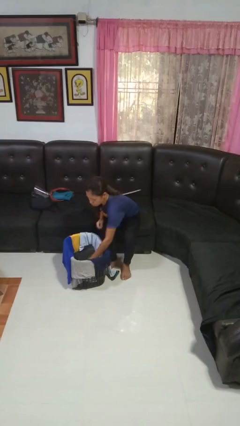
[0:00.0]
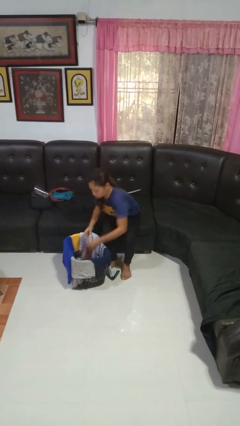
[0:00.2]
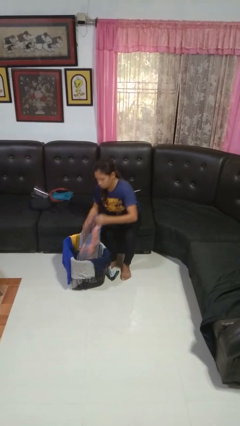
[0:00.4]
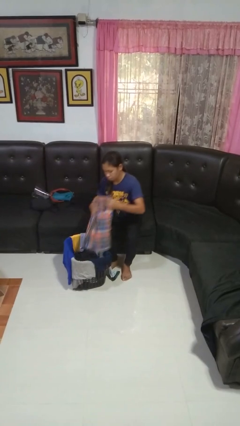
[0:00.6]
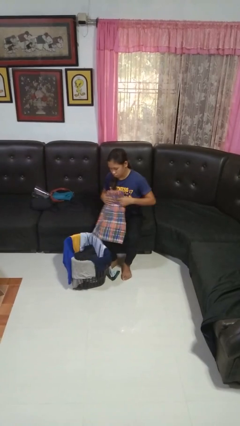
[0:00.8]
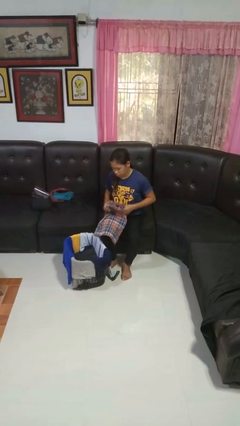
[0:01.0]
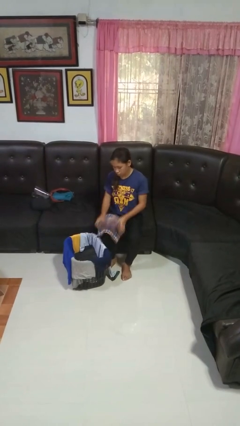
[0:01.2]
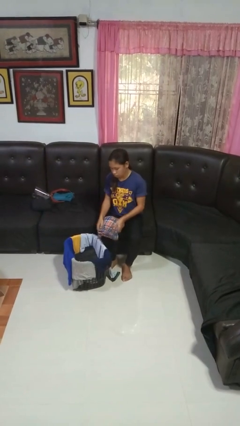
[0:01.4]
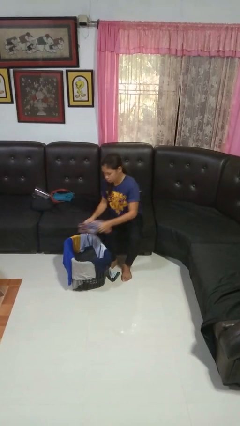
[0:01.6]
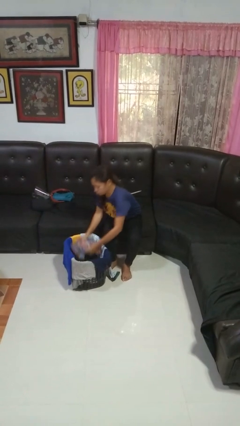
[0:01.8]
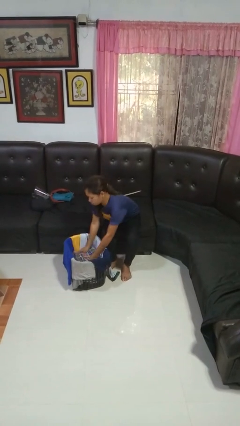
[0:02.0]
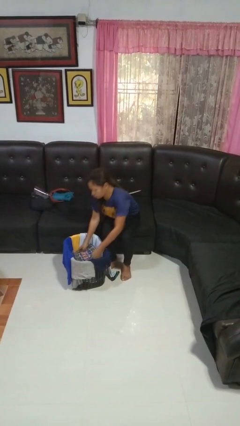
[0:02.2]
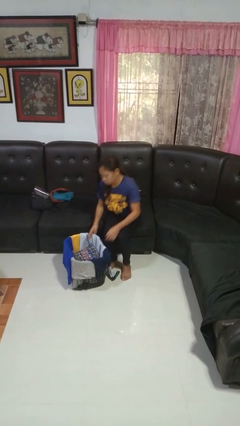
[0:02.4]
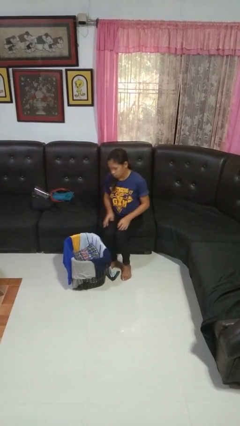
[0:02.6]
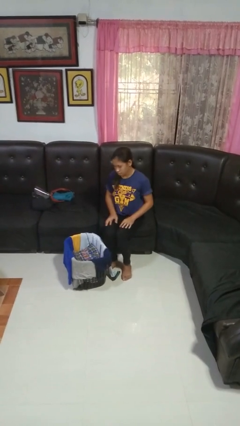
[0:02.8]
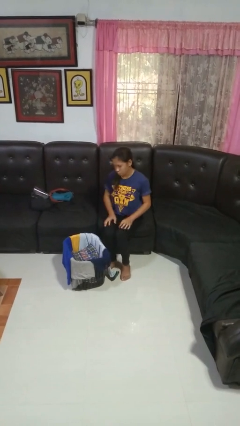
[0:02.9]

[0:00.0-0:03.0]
person folds pants

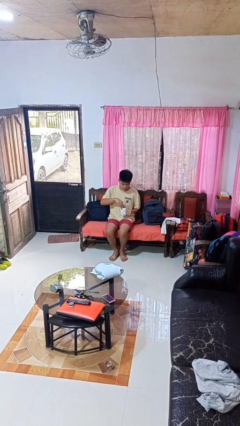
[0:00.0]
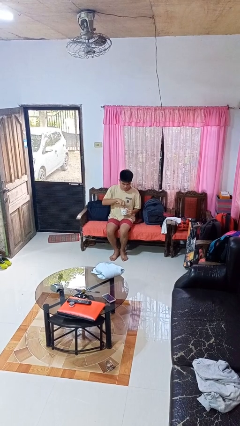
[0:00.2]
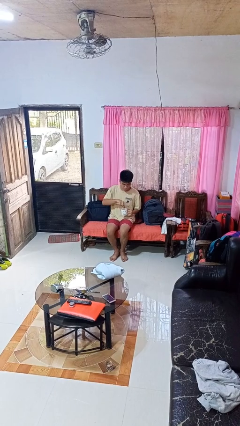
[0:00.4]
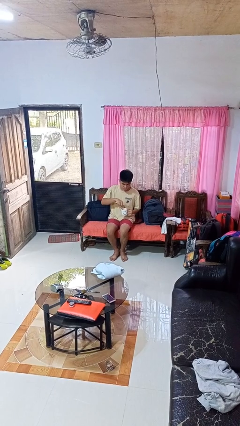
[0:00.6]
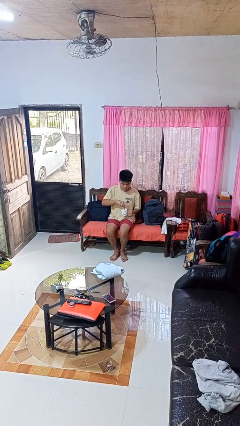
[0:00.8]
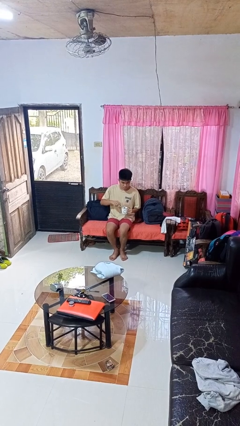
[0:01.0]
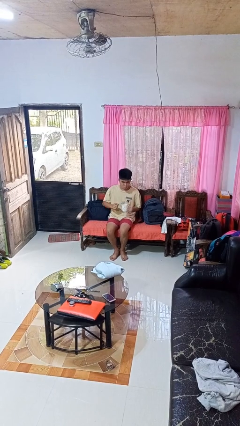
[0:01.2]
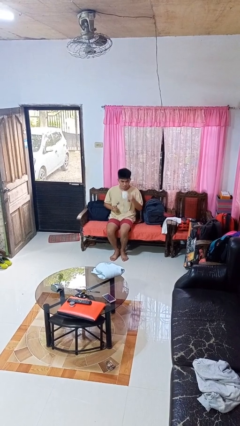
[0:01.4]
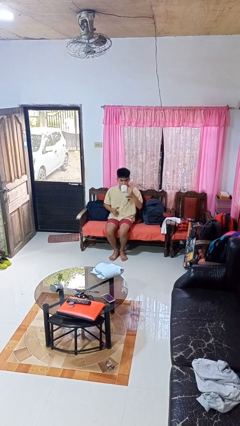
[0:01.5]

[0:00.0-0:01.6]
person stirs mug

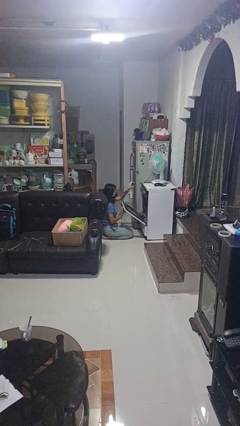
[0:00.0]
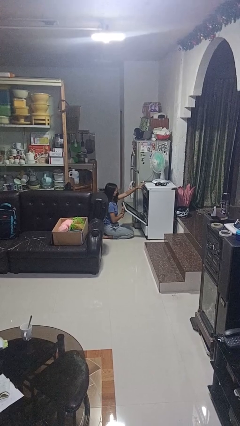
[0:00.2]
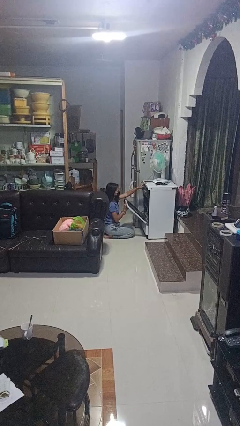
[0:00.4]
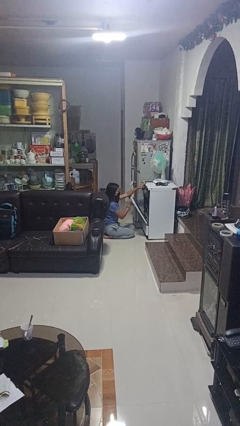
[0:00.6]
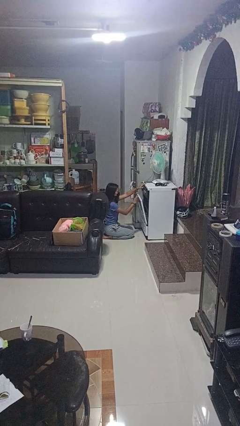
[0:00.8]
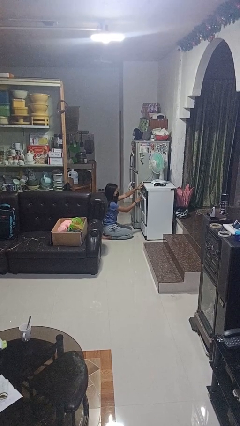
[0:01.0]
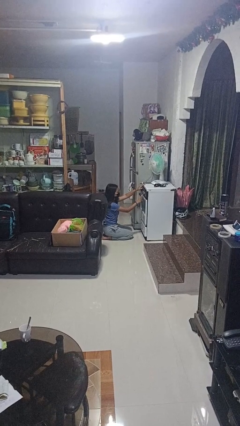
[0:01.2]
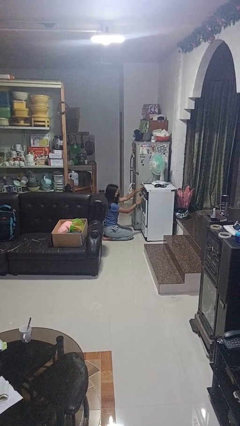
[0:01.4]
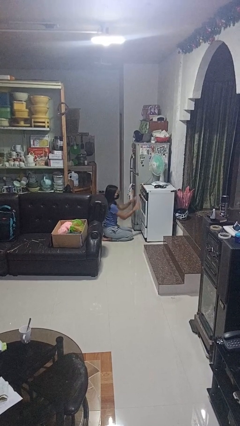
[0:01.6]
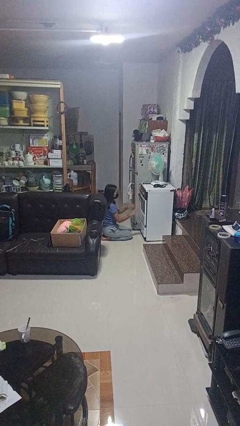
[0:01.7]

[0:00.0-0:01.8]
person closes oven door

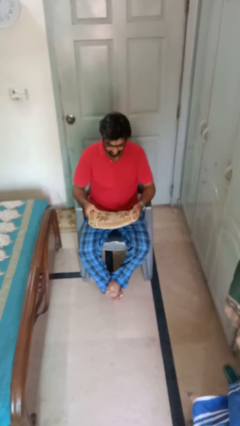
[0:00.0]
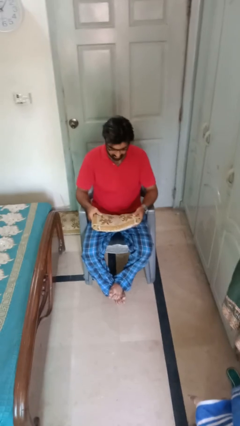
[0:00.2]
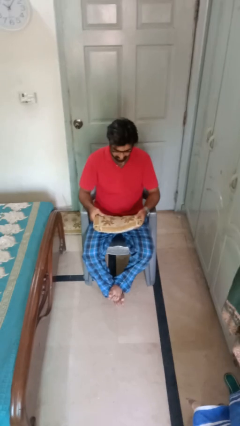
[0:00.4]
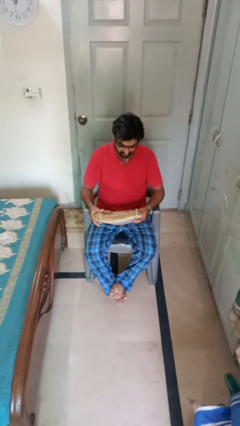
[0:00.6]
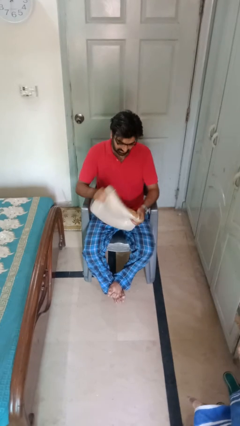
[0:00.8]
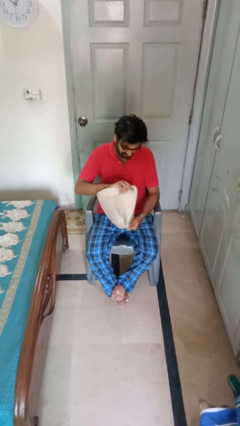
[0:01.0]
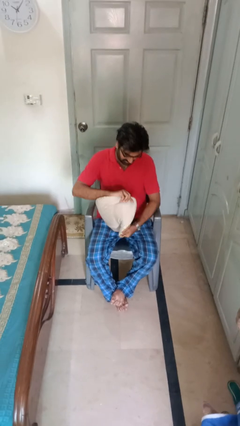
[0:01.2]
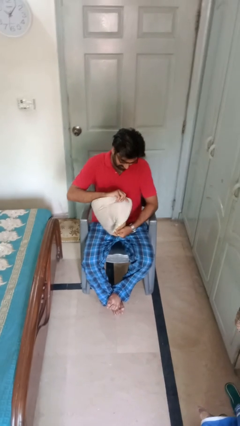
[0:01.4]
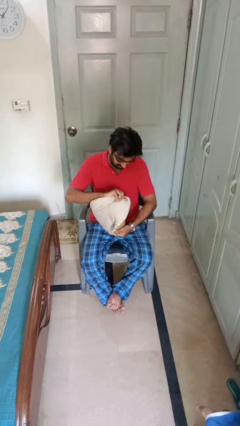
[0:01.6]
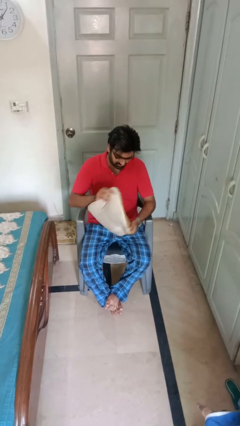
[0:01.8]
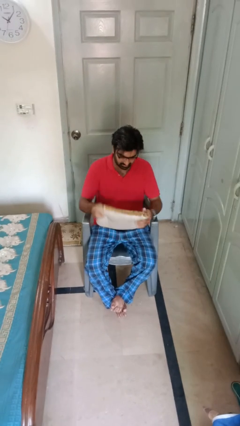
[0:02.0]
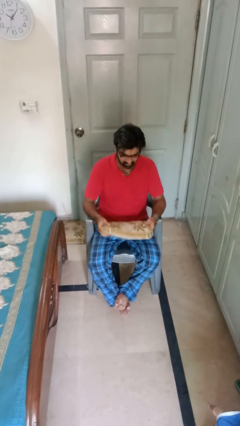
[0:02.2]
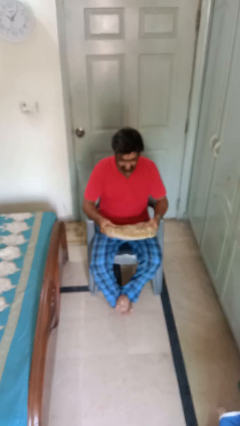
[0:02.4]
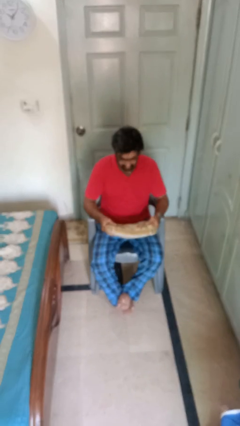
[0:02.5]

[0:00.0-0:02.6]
person squeezes object

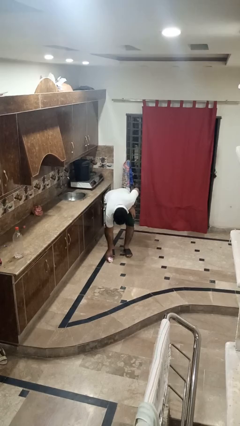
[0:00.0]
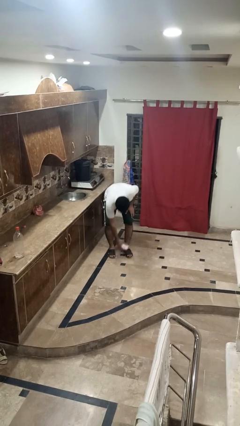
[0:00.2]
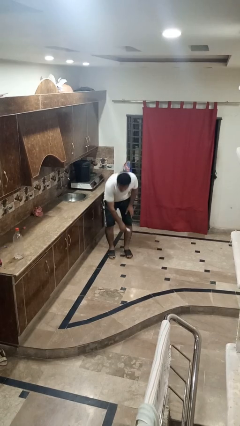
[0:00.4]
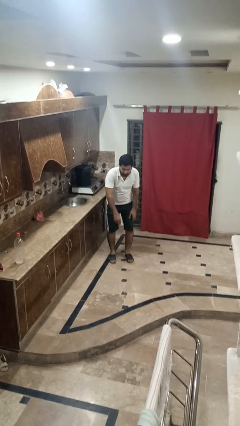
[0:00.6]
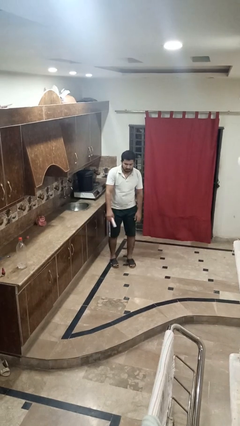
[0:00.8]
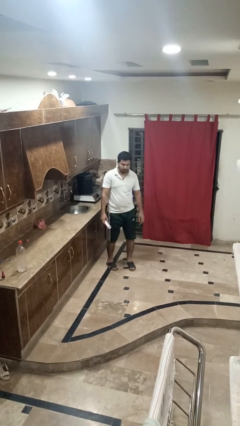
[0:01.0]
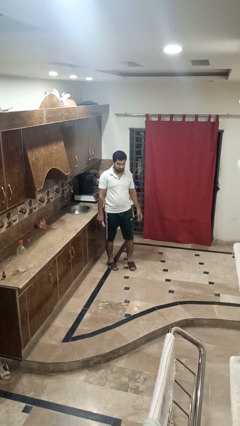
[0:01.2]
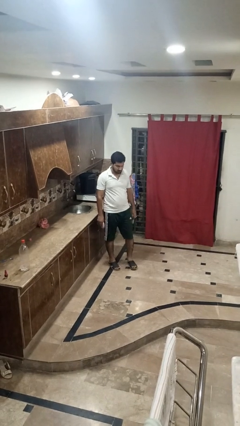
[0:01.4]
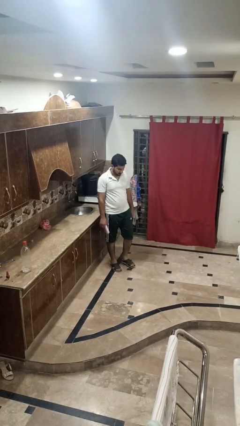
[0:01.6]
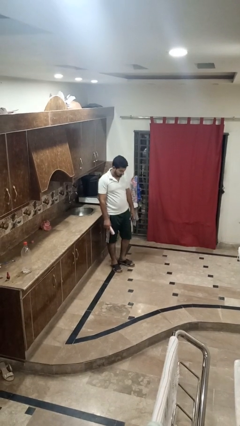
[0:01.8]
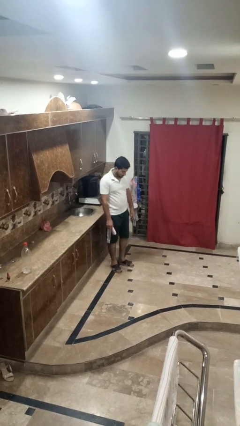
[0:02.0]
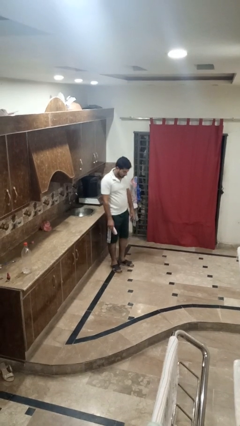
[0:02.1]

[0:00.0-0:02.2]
person picks up object from floor

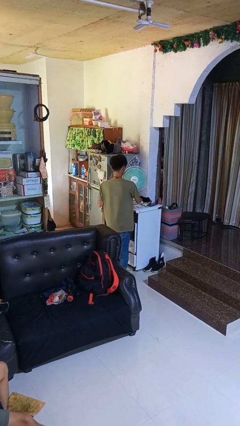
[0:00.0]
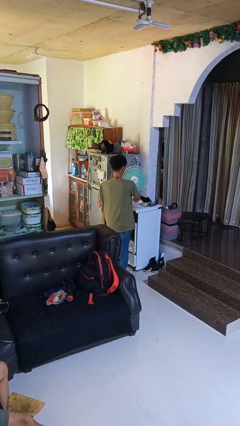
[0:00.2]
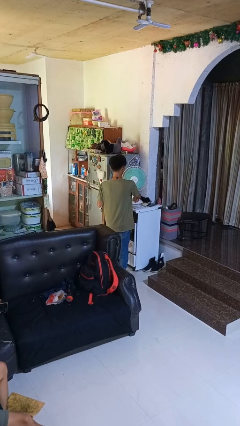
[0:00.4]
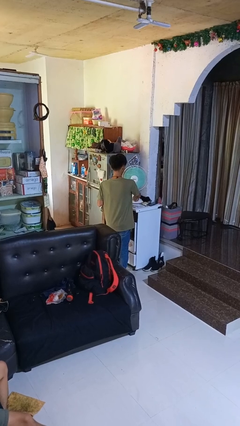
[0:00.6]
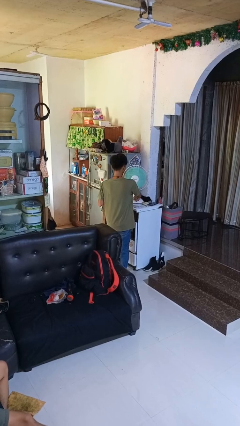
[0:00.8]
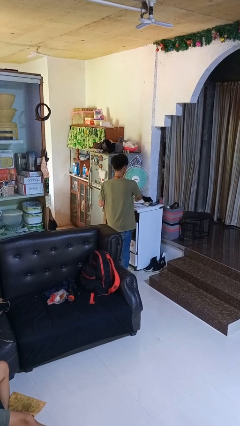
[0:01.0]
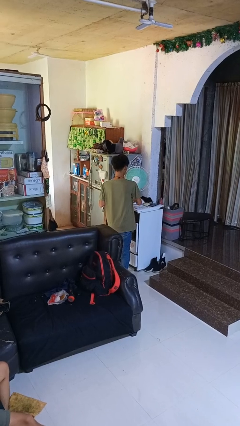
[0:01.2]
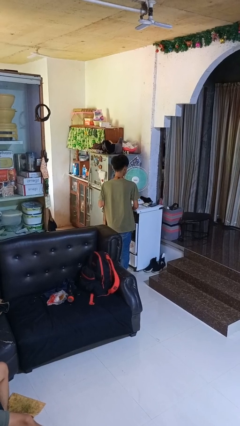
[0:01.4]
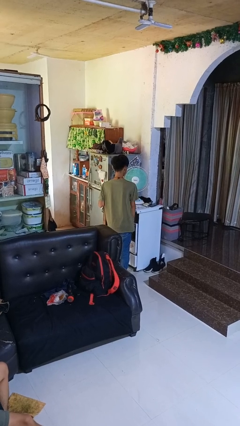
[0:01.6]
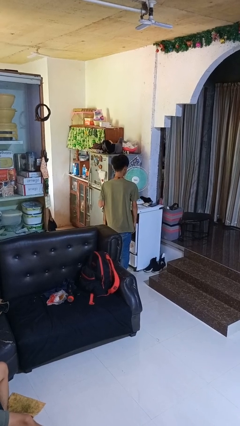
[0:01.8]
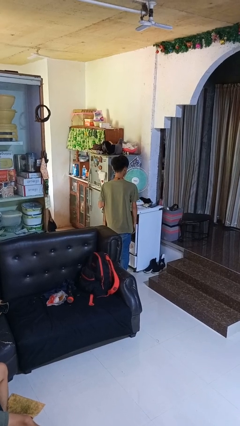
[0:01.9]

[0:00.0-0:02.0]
person turns off fan

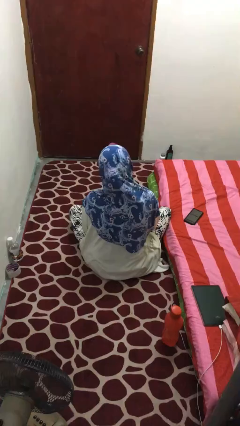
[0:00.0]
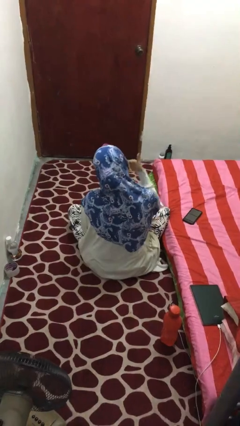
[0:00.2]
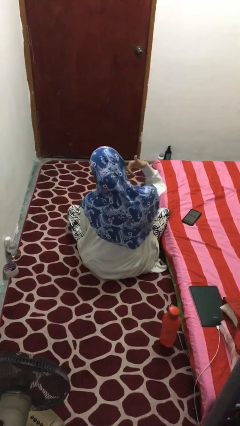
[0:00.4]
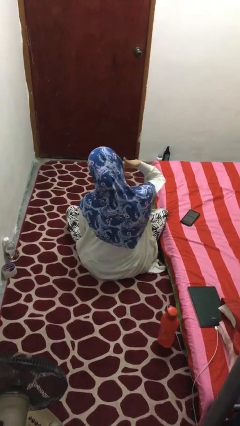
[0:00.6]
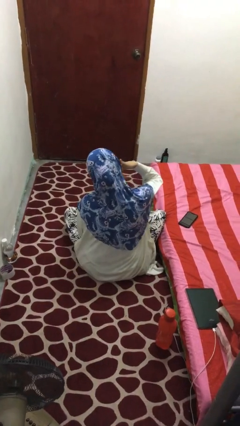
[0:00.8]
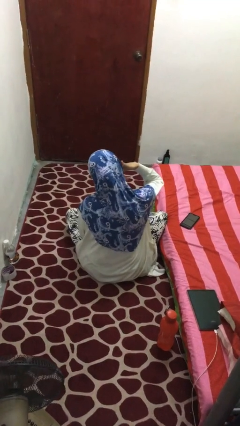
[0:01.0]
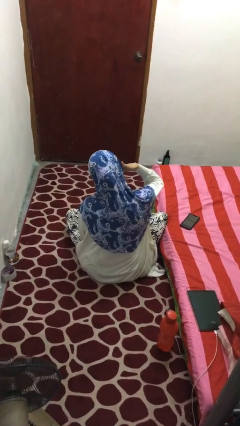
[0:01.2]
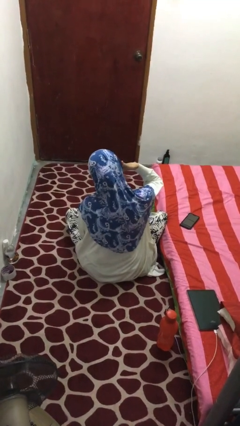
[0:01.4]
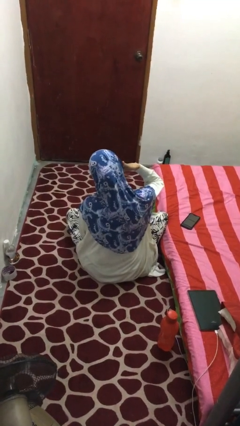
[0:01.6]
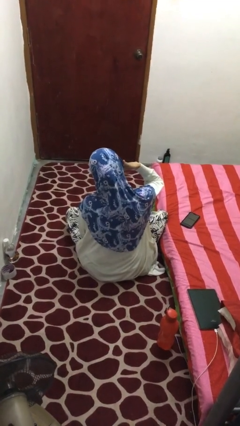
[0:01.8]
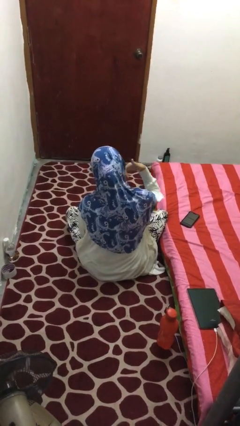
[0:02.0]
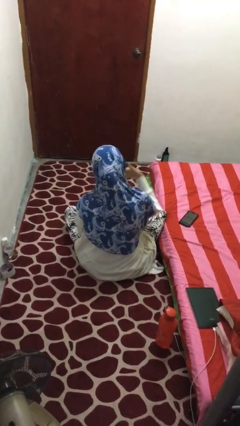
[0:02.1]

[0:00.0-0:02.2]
person gestures call me

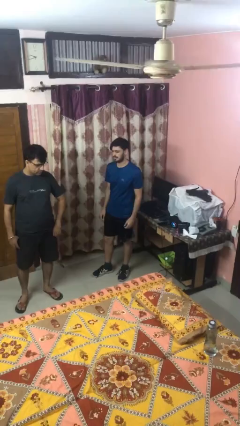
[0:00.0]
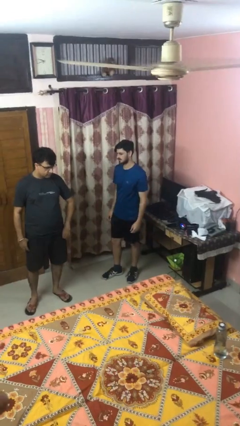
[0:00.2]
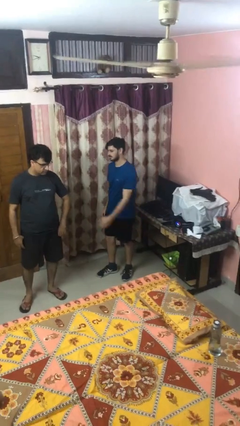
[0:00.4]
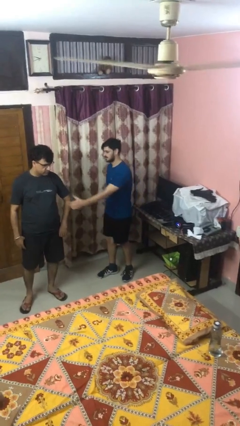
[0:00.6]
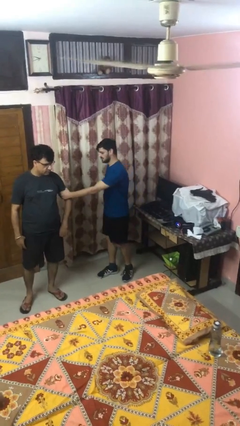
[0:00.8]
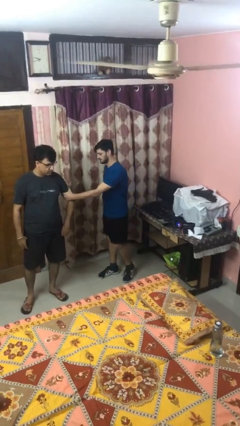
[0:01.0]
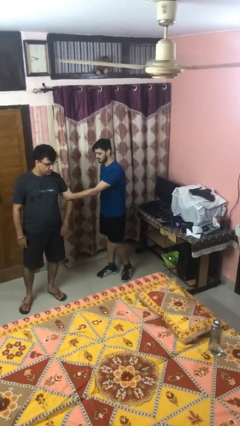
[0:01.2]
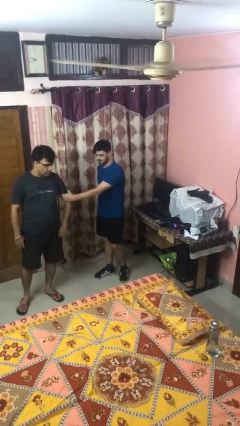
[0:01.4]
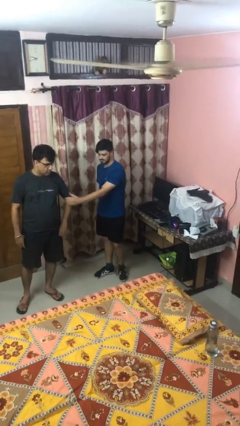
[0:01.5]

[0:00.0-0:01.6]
person grabs person by bicep
